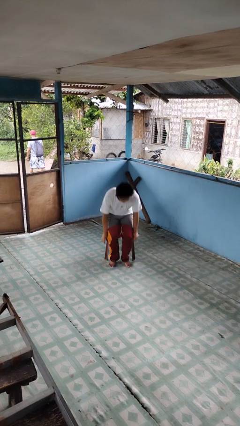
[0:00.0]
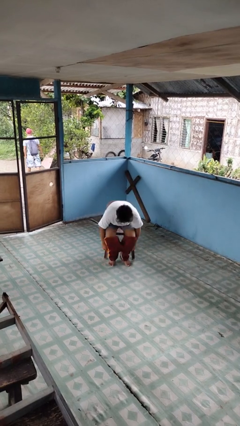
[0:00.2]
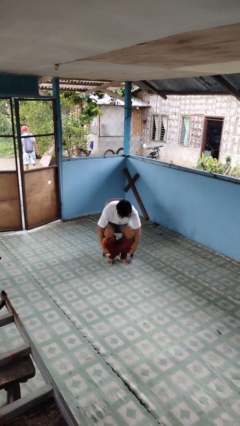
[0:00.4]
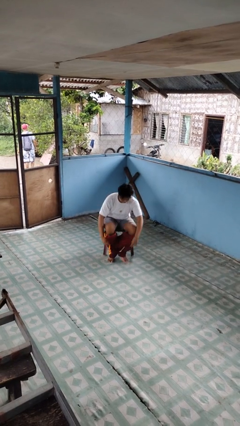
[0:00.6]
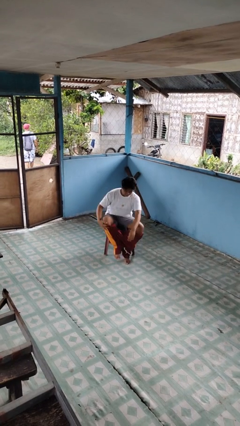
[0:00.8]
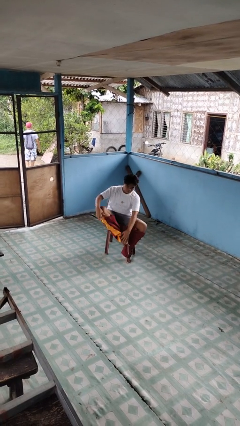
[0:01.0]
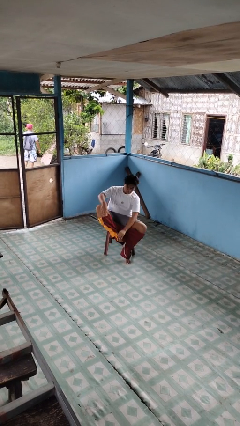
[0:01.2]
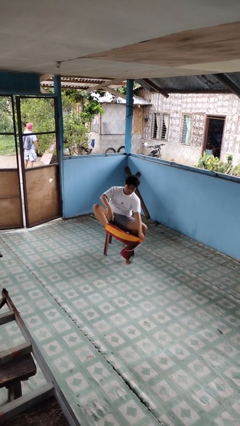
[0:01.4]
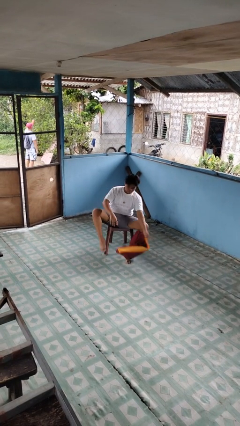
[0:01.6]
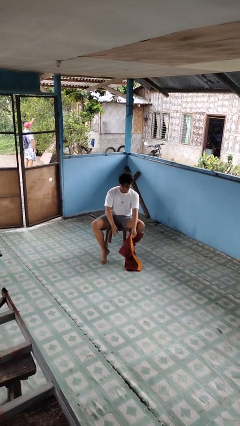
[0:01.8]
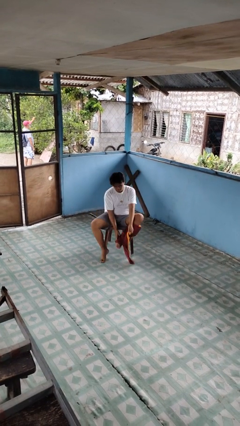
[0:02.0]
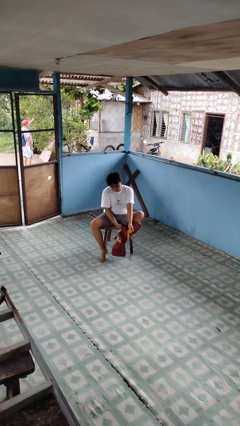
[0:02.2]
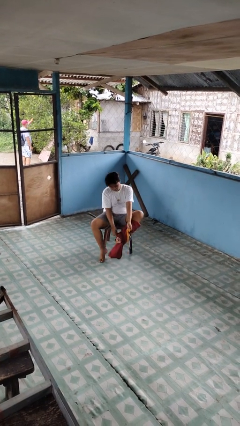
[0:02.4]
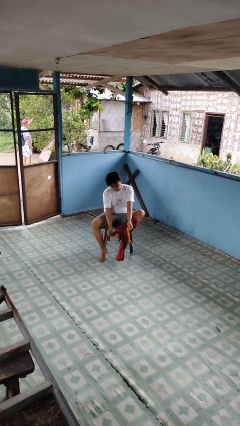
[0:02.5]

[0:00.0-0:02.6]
person takes off pants

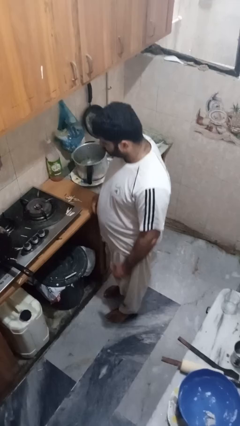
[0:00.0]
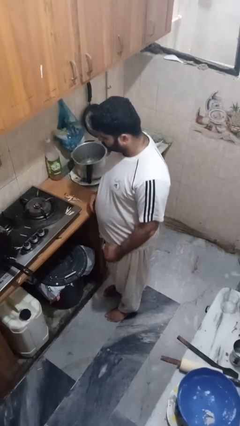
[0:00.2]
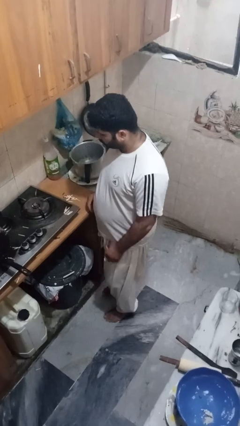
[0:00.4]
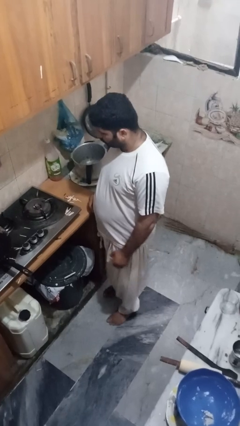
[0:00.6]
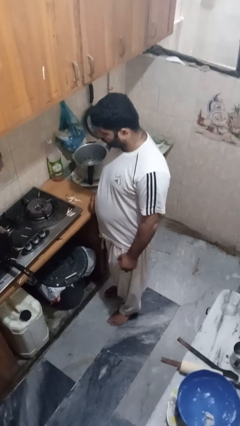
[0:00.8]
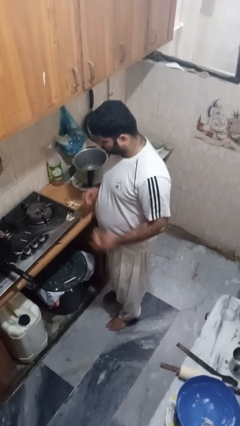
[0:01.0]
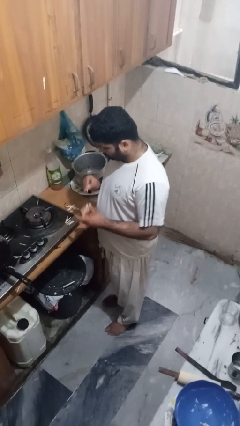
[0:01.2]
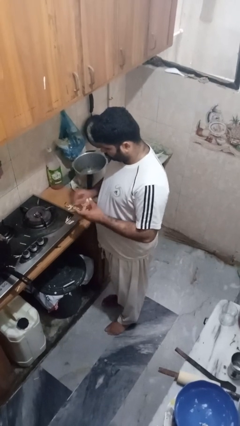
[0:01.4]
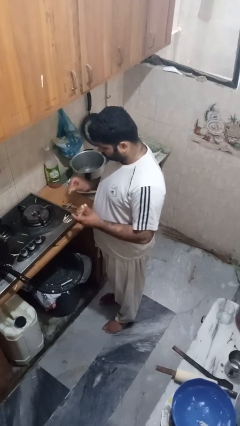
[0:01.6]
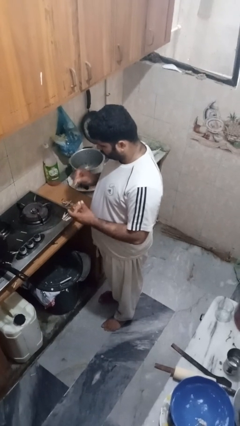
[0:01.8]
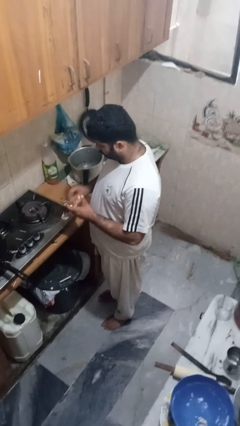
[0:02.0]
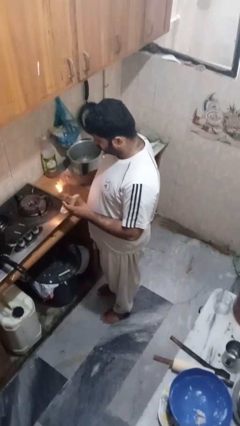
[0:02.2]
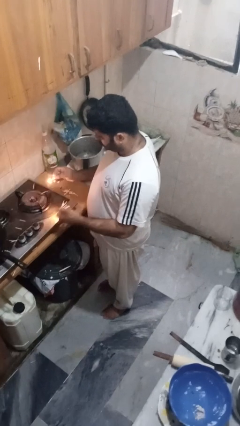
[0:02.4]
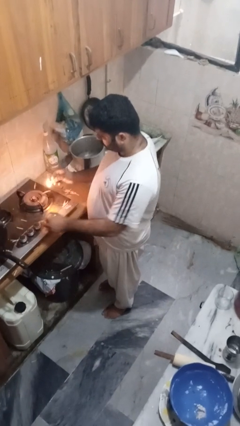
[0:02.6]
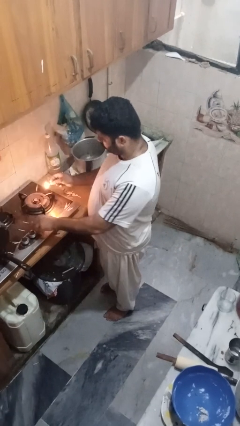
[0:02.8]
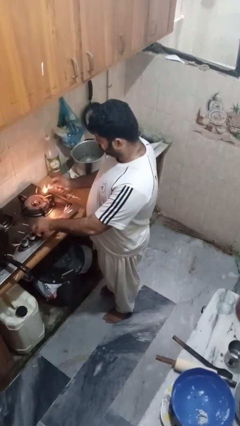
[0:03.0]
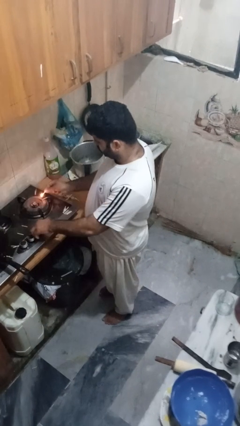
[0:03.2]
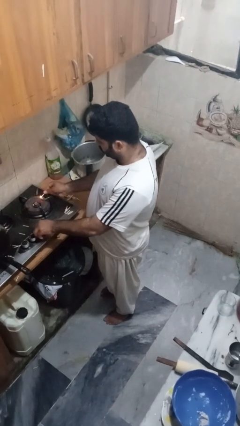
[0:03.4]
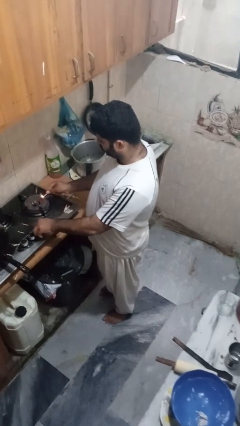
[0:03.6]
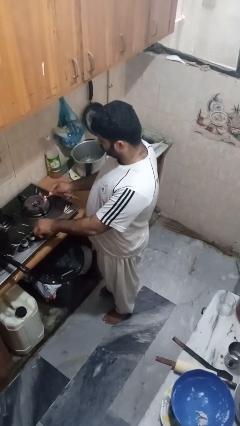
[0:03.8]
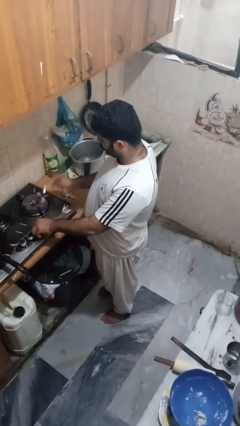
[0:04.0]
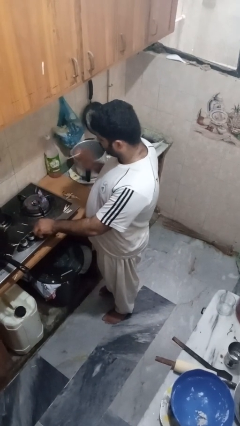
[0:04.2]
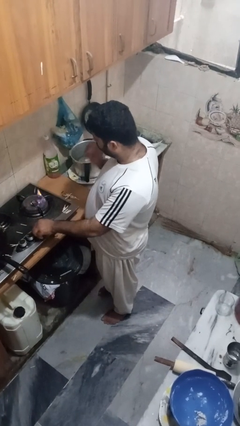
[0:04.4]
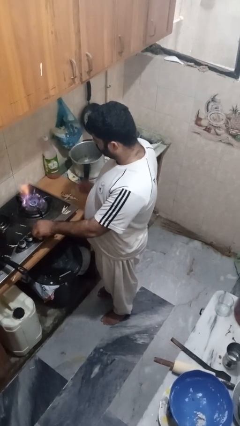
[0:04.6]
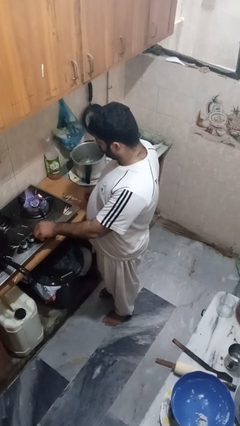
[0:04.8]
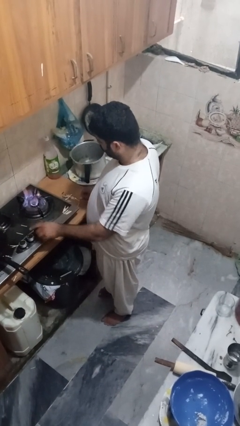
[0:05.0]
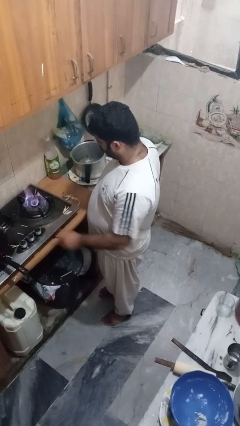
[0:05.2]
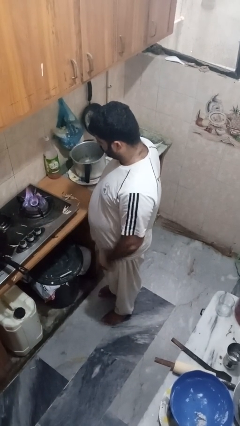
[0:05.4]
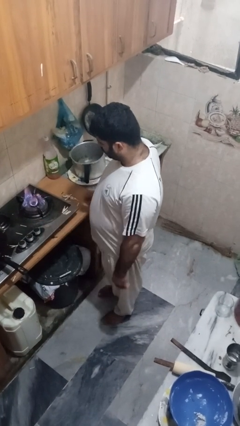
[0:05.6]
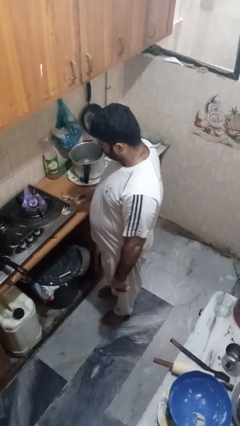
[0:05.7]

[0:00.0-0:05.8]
person turns on stovetop

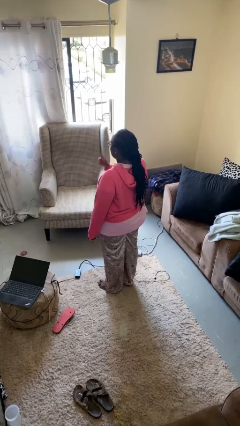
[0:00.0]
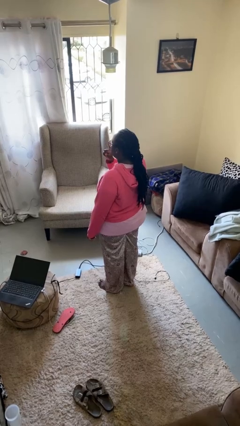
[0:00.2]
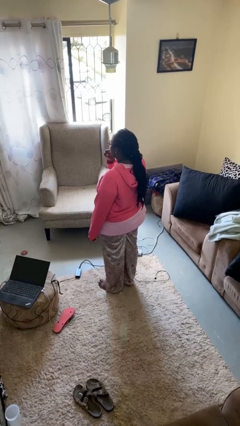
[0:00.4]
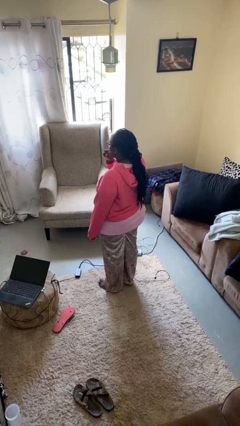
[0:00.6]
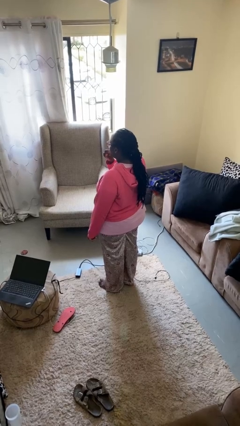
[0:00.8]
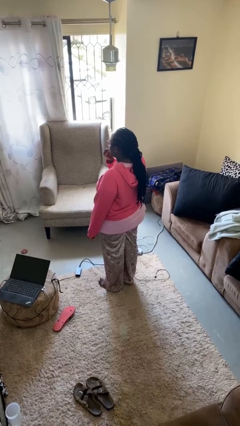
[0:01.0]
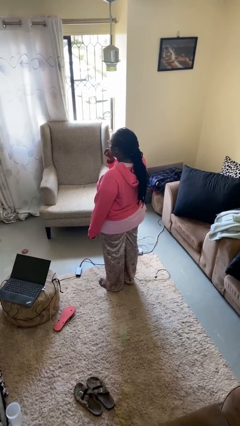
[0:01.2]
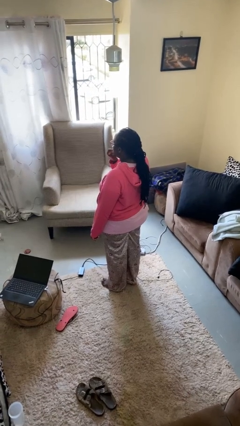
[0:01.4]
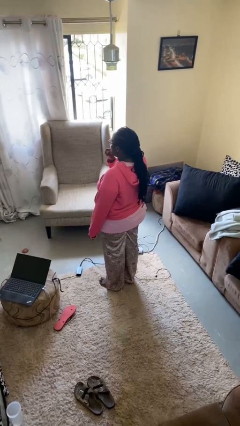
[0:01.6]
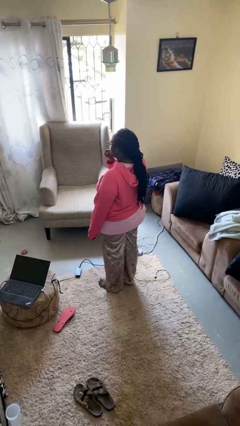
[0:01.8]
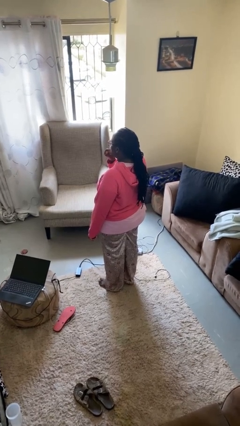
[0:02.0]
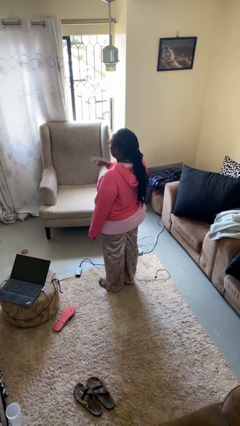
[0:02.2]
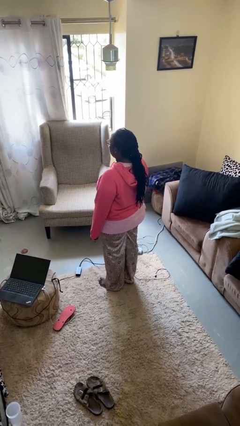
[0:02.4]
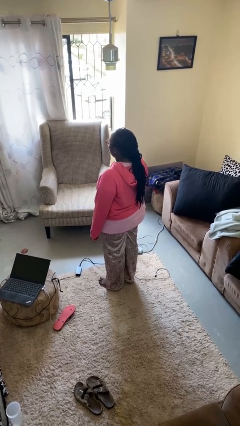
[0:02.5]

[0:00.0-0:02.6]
person gestures be quiet

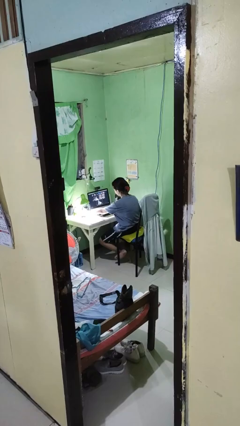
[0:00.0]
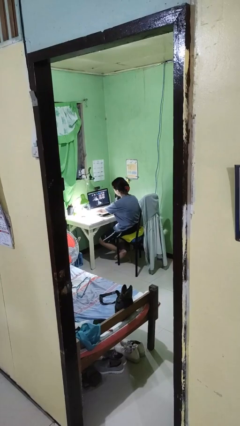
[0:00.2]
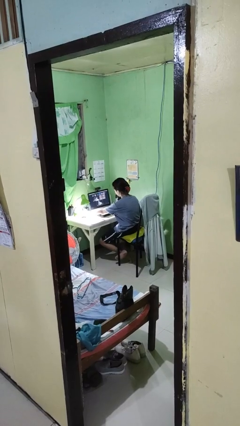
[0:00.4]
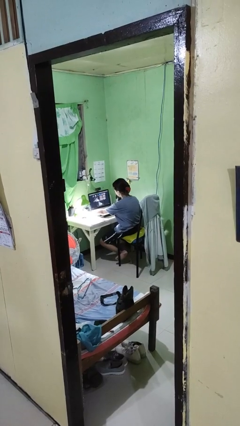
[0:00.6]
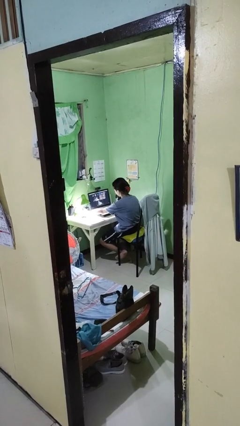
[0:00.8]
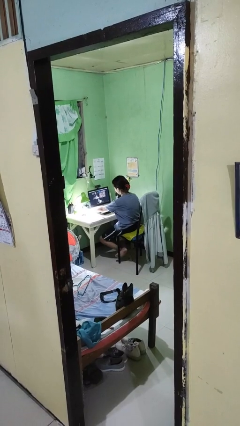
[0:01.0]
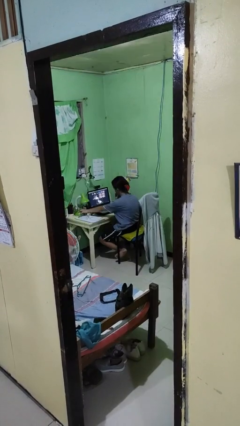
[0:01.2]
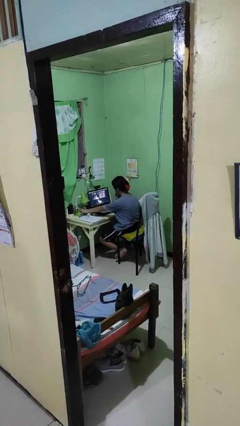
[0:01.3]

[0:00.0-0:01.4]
person turns off lamp

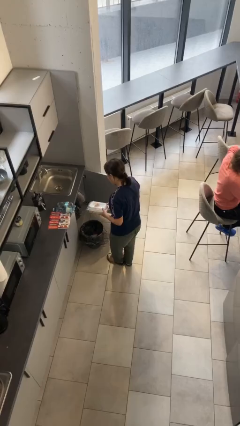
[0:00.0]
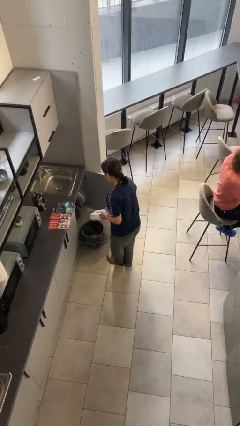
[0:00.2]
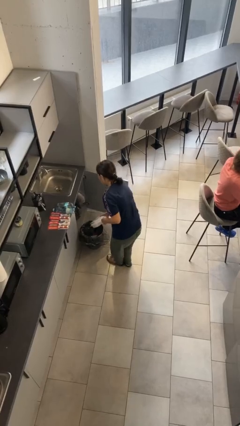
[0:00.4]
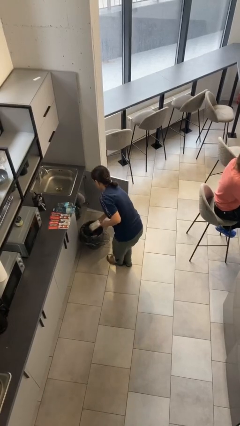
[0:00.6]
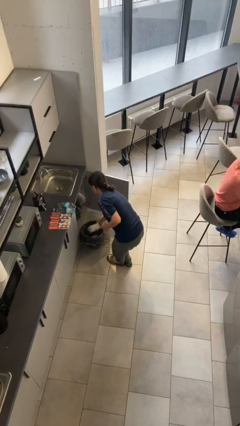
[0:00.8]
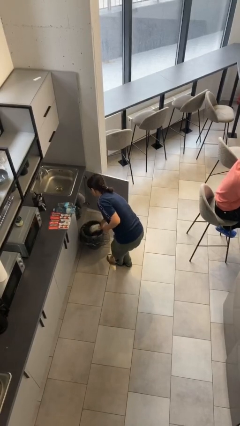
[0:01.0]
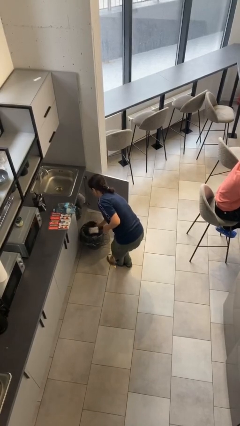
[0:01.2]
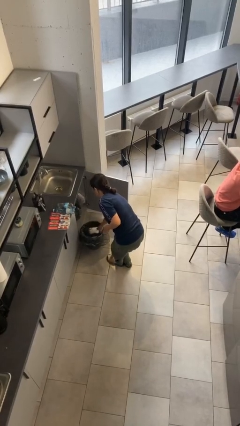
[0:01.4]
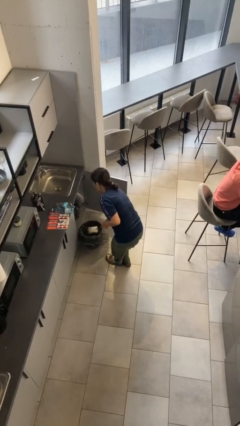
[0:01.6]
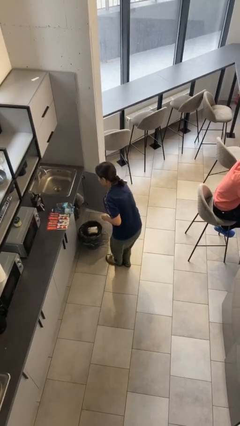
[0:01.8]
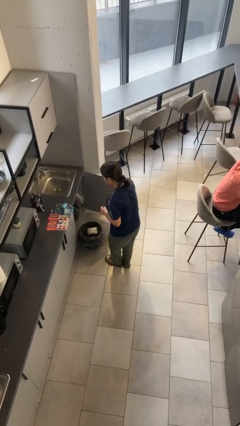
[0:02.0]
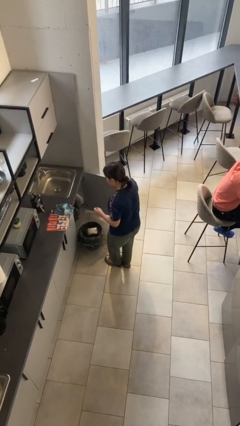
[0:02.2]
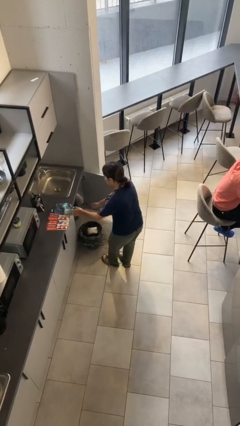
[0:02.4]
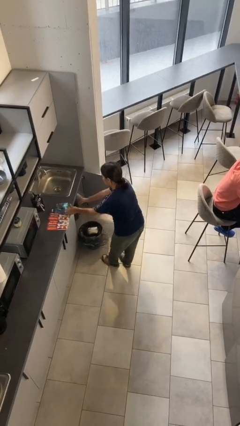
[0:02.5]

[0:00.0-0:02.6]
person discards trash

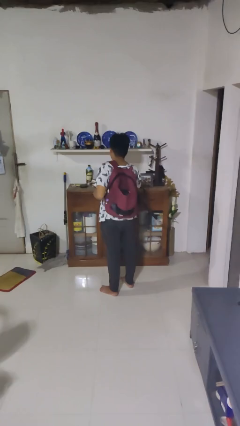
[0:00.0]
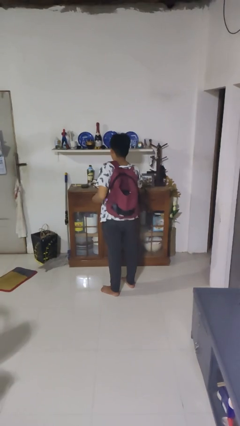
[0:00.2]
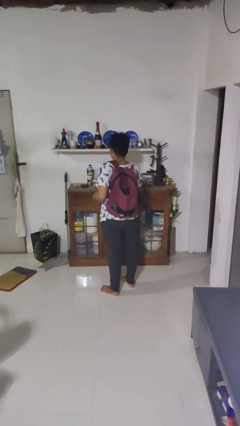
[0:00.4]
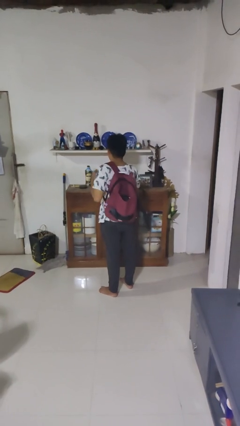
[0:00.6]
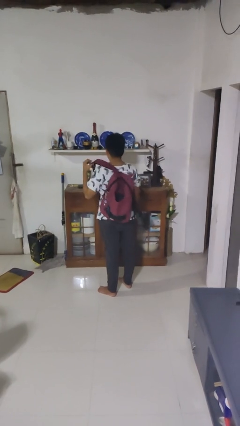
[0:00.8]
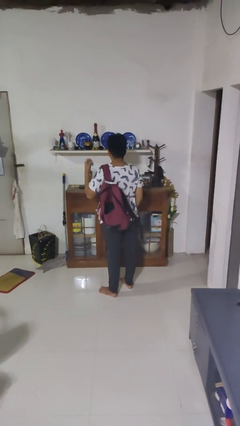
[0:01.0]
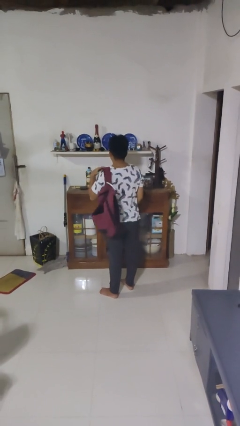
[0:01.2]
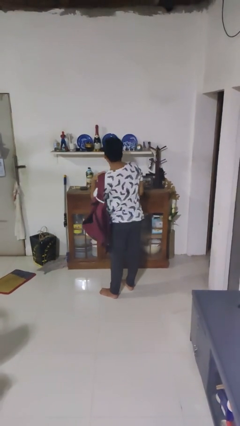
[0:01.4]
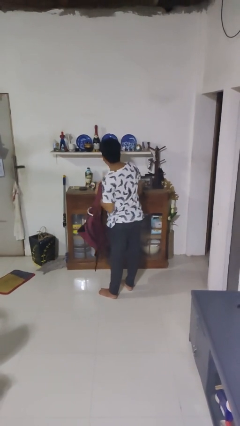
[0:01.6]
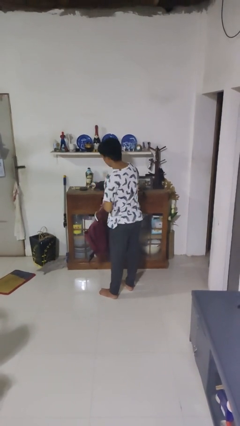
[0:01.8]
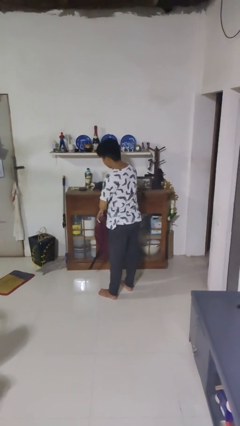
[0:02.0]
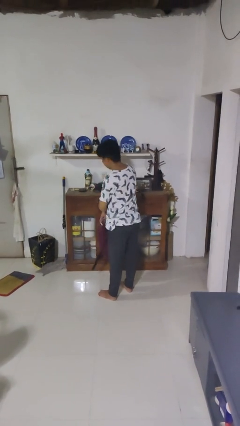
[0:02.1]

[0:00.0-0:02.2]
person takes off backpack
